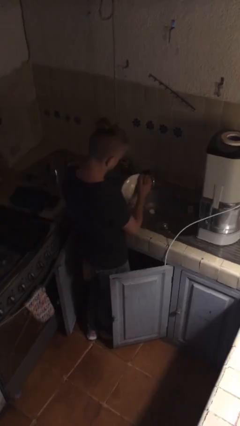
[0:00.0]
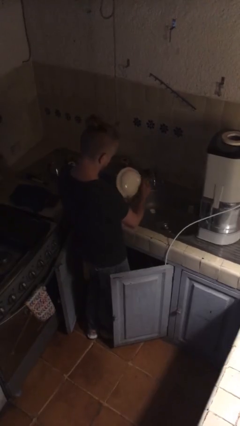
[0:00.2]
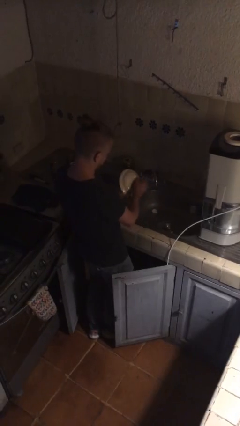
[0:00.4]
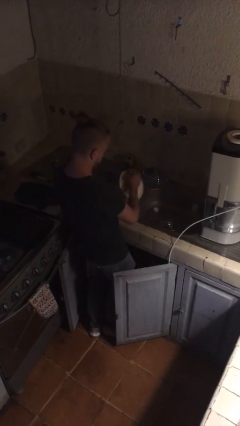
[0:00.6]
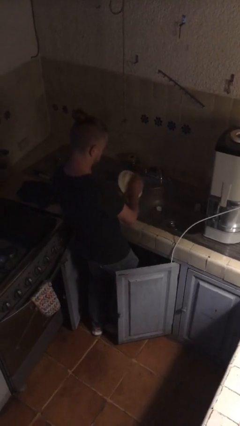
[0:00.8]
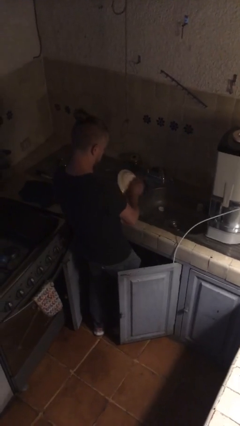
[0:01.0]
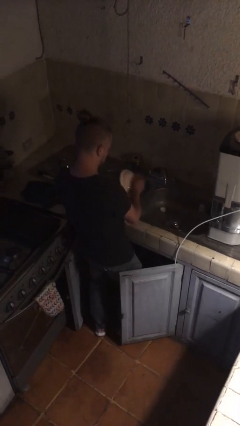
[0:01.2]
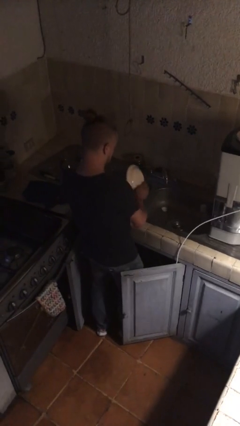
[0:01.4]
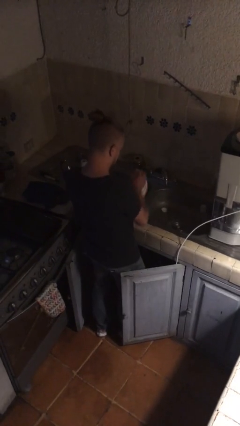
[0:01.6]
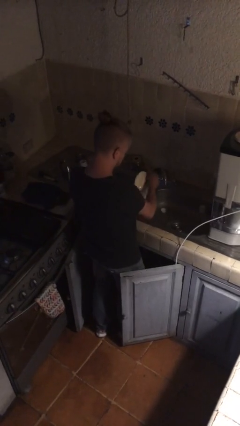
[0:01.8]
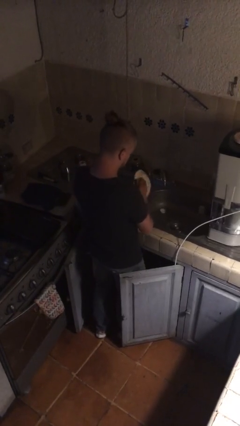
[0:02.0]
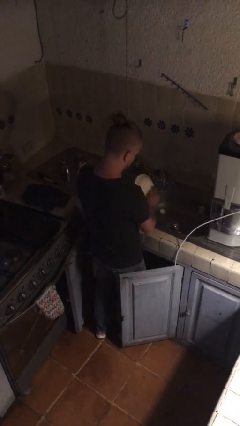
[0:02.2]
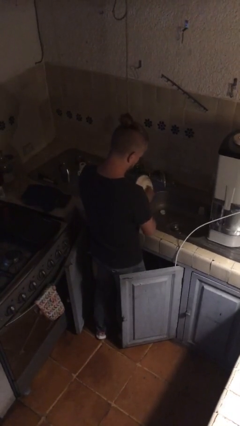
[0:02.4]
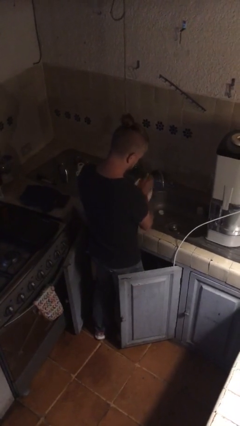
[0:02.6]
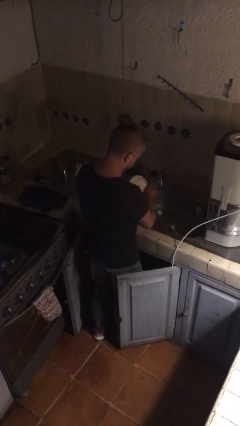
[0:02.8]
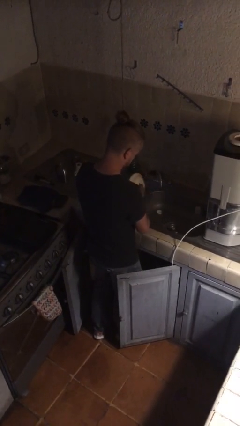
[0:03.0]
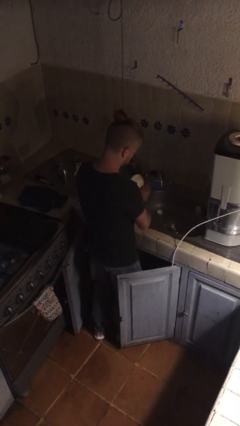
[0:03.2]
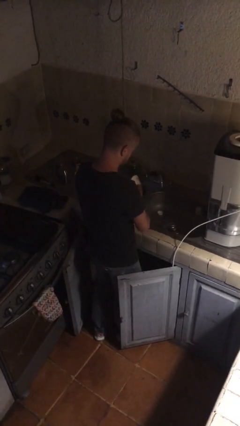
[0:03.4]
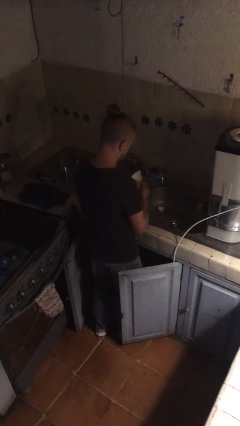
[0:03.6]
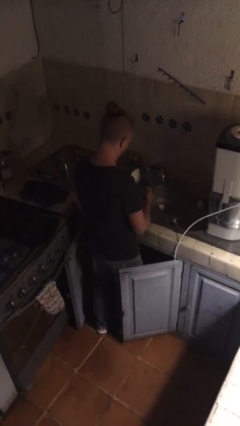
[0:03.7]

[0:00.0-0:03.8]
person washes dish

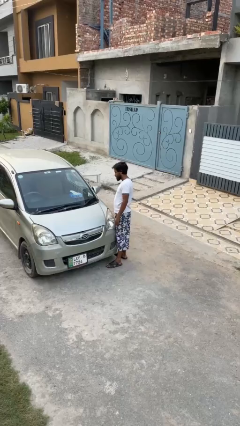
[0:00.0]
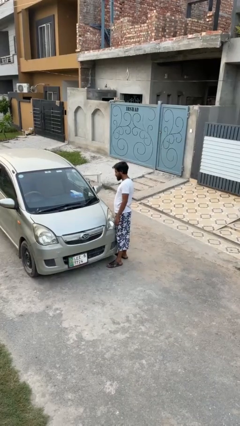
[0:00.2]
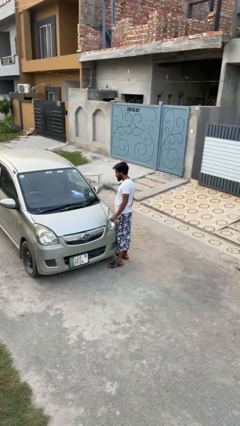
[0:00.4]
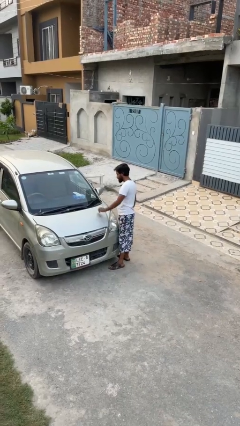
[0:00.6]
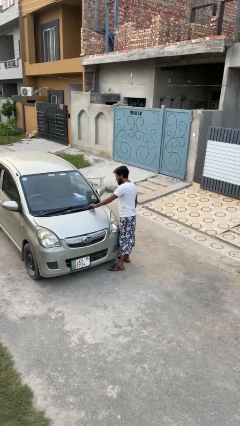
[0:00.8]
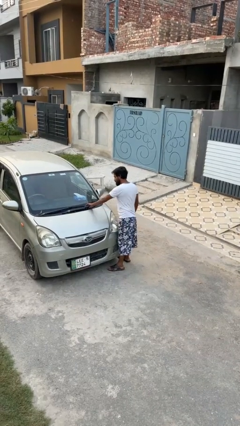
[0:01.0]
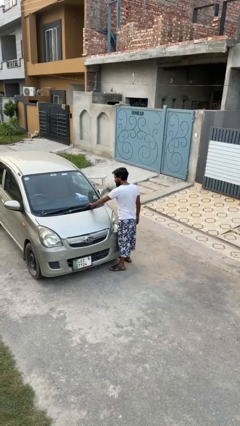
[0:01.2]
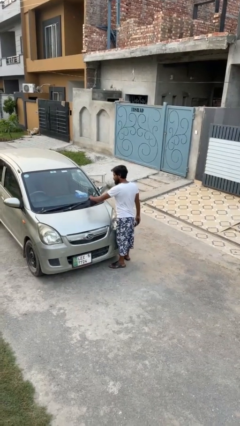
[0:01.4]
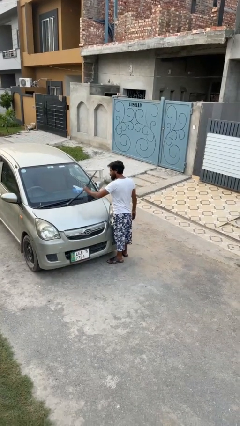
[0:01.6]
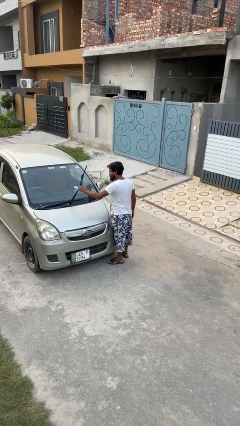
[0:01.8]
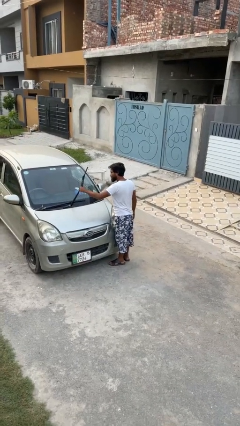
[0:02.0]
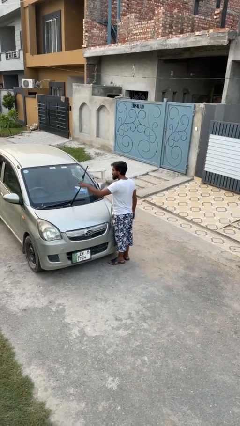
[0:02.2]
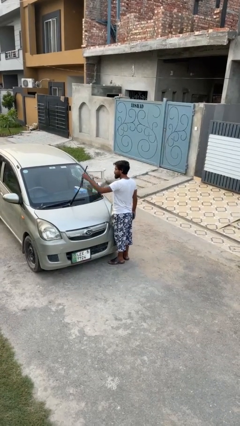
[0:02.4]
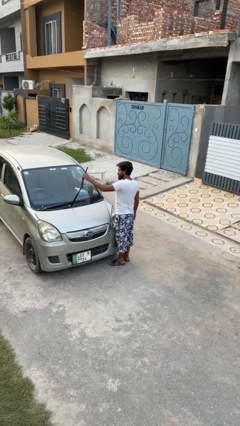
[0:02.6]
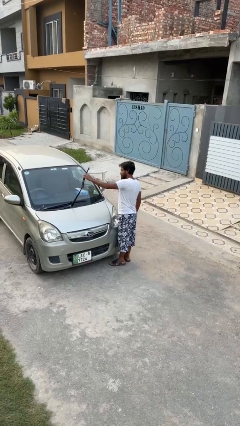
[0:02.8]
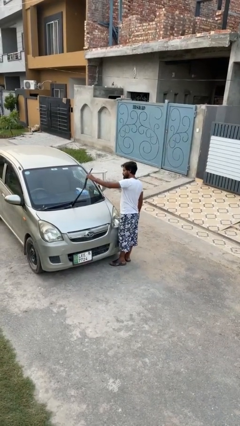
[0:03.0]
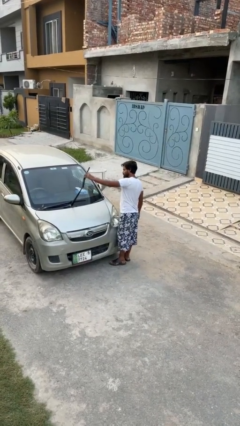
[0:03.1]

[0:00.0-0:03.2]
person flips up car wipers

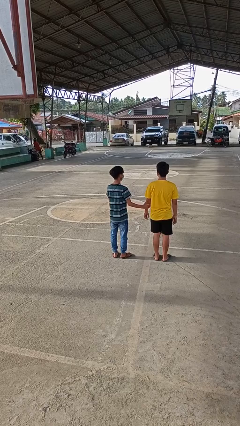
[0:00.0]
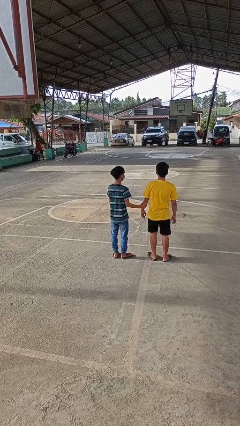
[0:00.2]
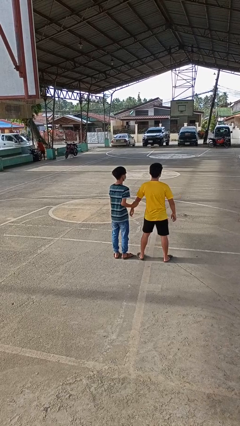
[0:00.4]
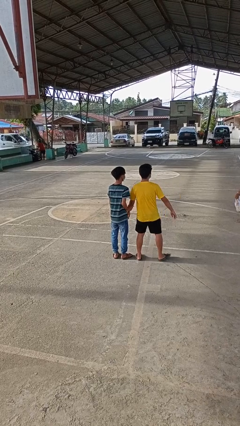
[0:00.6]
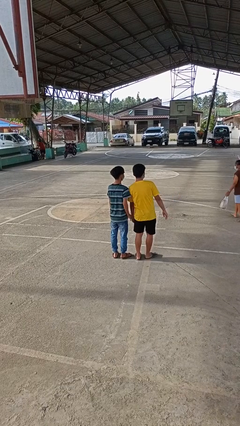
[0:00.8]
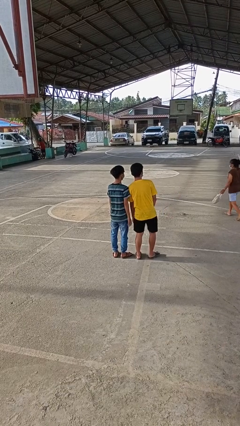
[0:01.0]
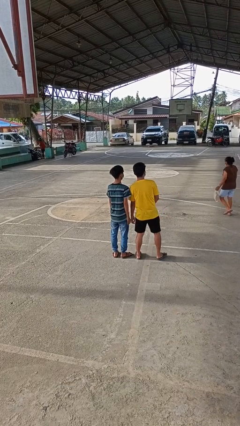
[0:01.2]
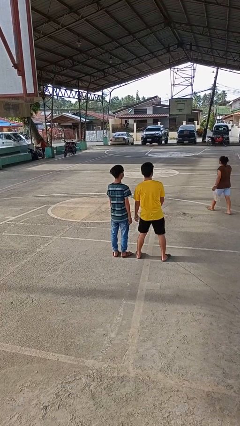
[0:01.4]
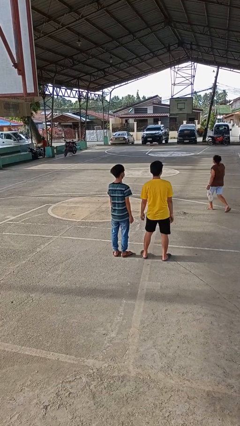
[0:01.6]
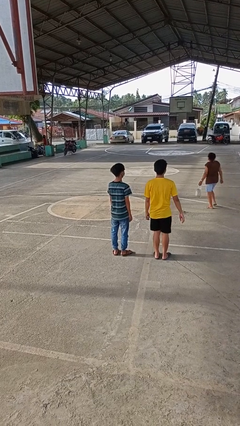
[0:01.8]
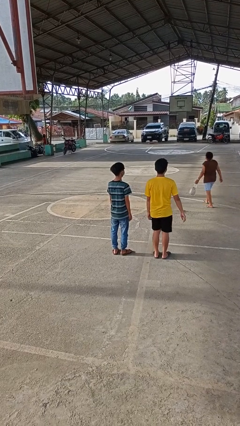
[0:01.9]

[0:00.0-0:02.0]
person grabs person by forearm

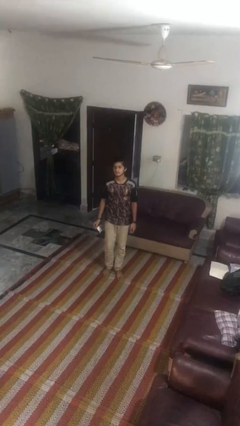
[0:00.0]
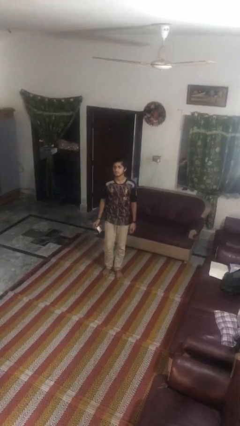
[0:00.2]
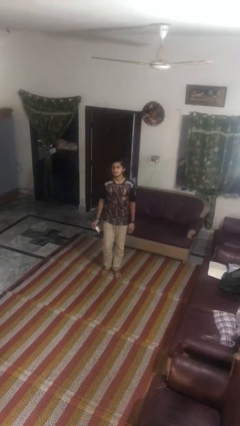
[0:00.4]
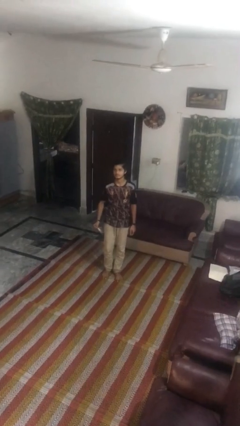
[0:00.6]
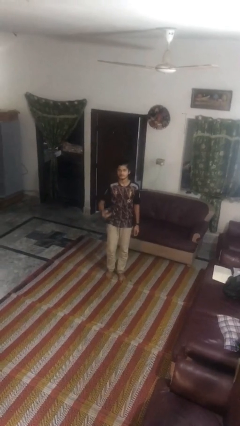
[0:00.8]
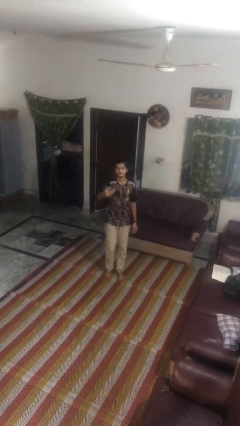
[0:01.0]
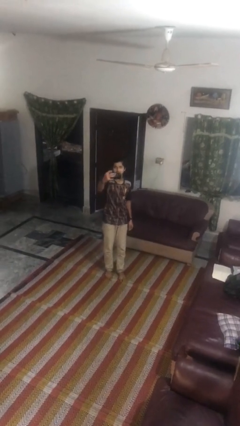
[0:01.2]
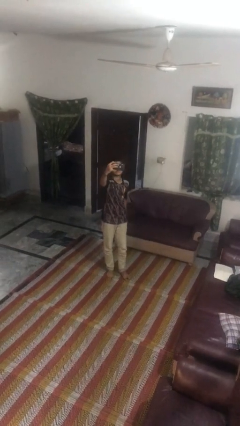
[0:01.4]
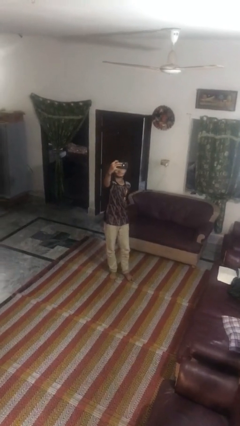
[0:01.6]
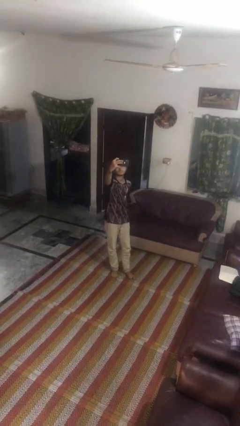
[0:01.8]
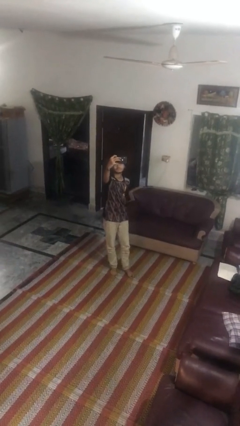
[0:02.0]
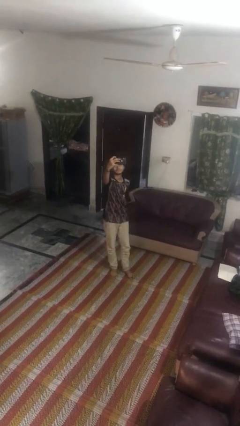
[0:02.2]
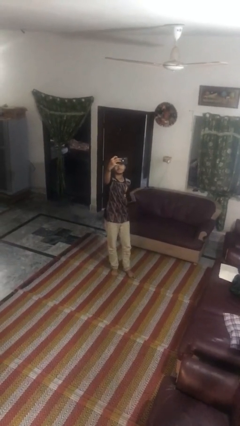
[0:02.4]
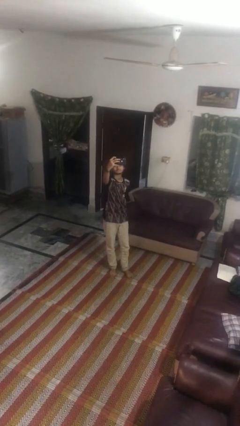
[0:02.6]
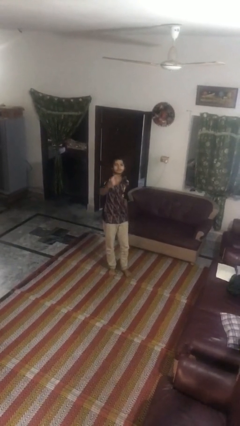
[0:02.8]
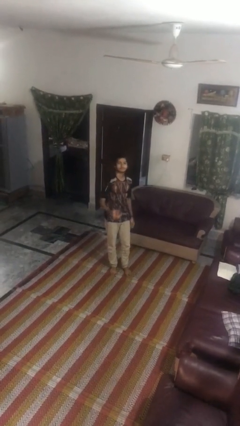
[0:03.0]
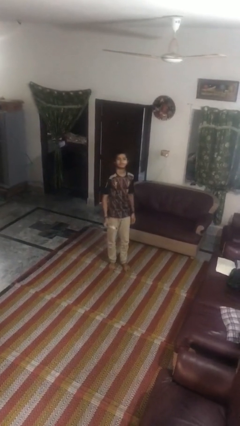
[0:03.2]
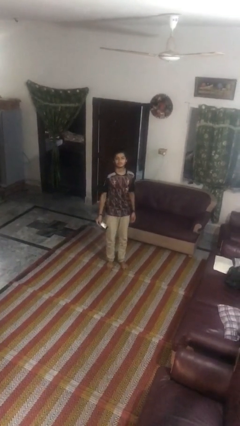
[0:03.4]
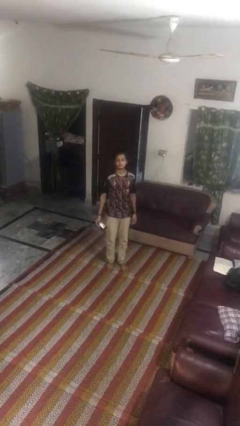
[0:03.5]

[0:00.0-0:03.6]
person takes selfie

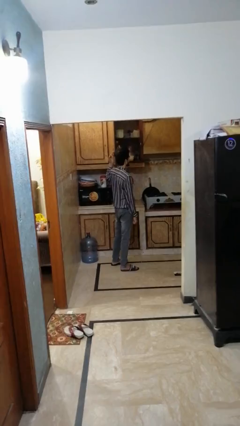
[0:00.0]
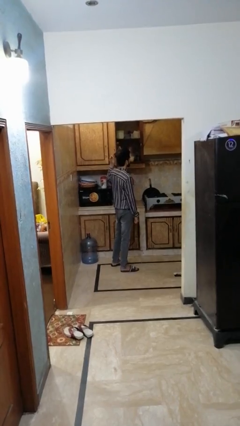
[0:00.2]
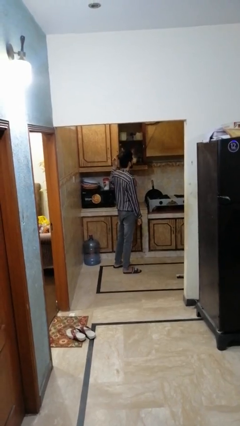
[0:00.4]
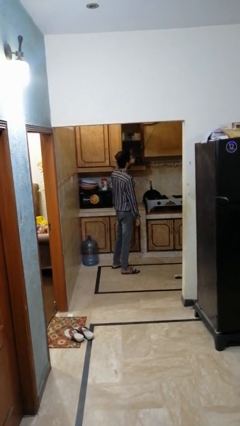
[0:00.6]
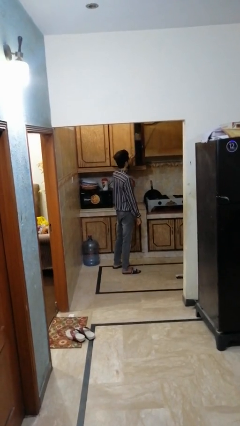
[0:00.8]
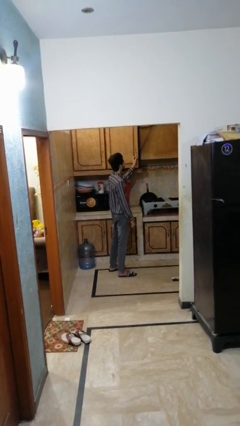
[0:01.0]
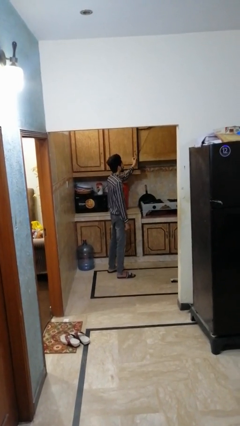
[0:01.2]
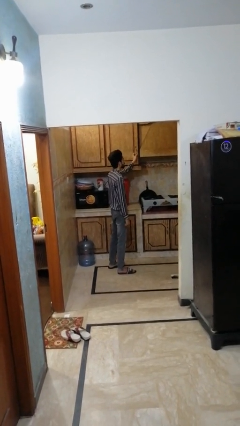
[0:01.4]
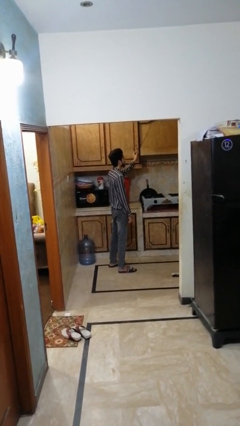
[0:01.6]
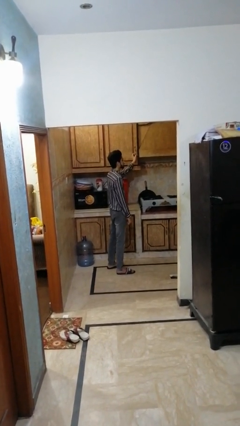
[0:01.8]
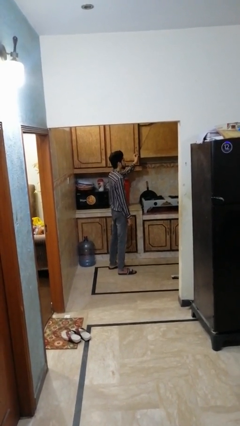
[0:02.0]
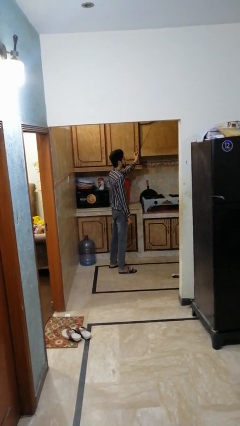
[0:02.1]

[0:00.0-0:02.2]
person closes cabinet

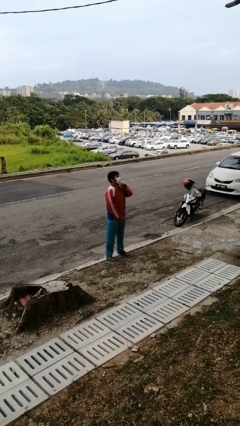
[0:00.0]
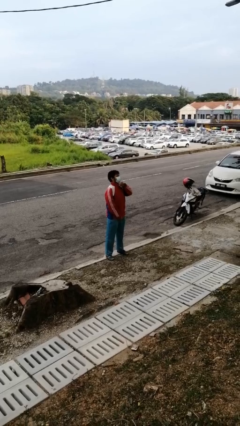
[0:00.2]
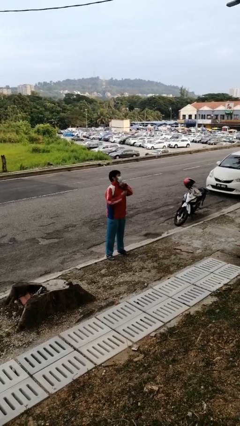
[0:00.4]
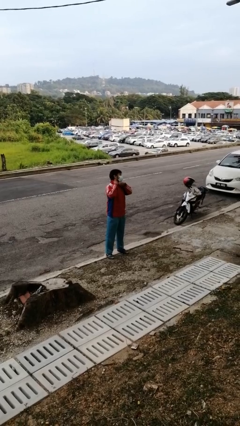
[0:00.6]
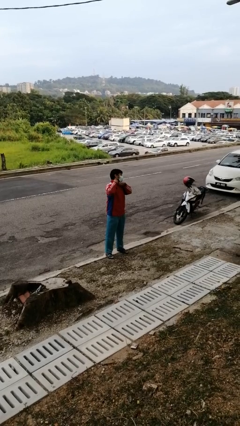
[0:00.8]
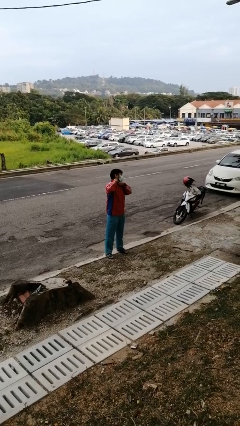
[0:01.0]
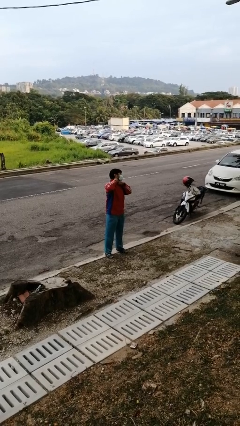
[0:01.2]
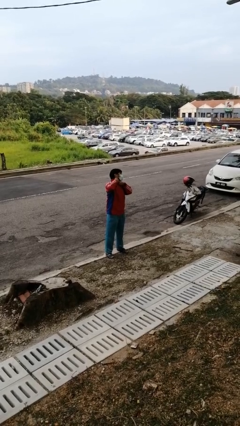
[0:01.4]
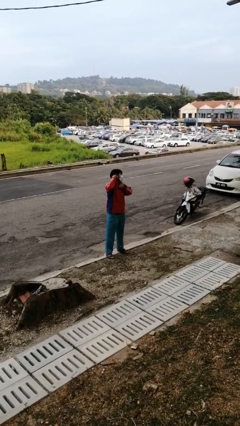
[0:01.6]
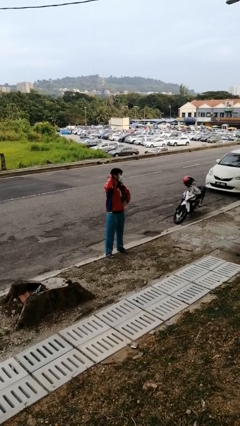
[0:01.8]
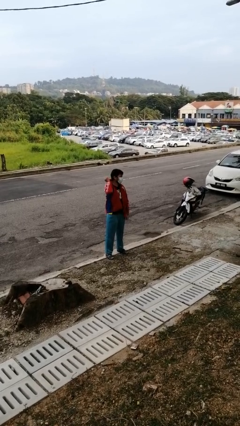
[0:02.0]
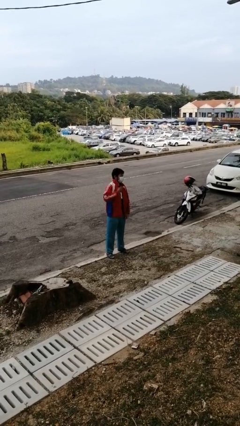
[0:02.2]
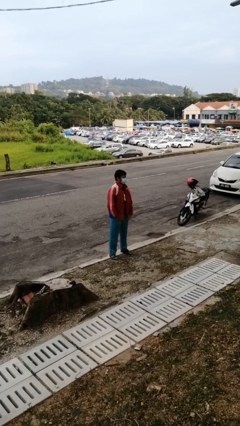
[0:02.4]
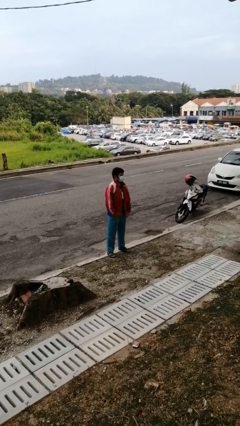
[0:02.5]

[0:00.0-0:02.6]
person unzips jacket

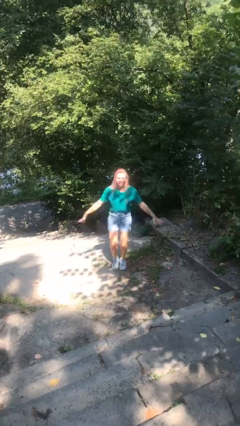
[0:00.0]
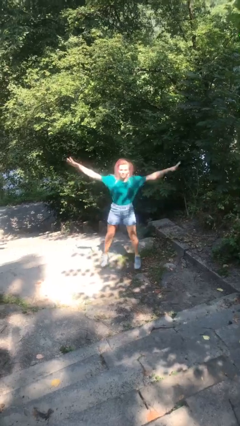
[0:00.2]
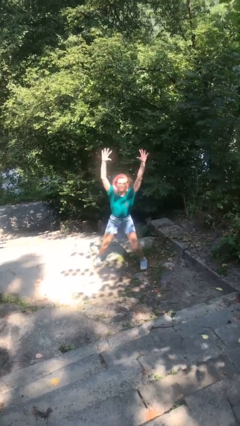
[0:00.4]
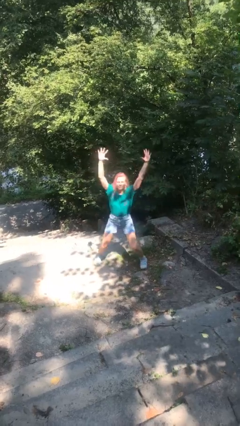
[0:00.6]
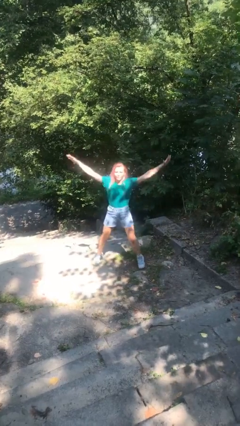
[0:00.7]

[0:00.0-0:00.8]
person exercises with jumping jacks
